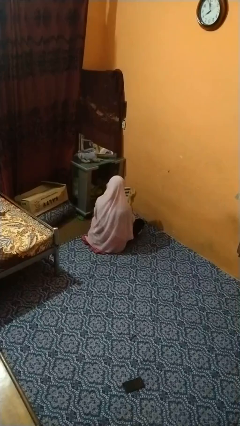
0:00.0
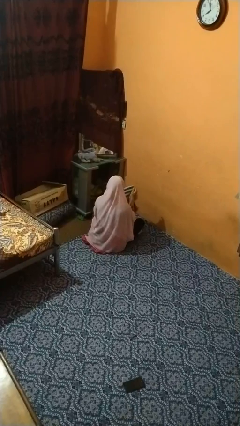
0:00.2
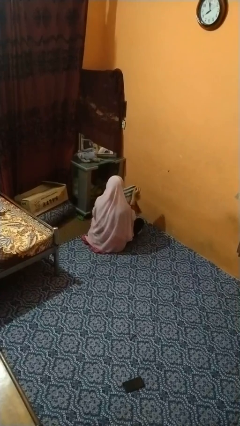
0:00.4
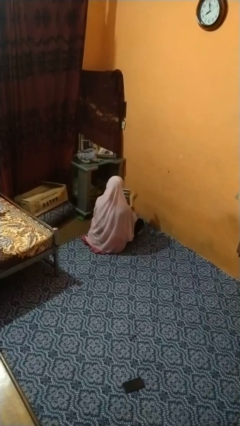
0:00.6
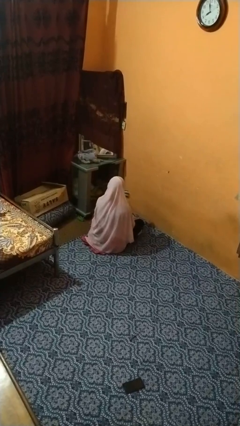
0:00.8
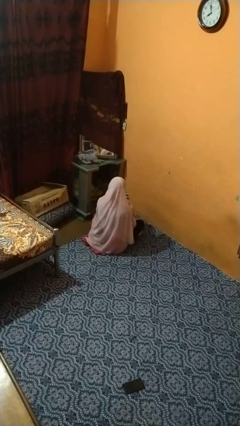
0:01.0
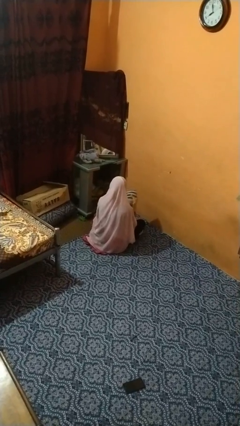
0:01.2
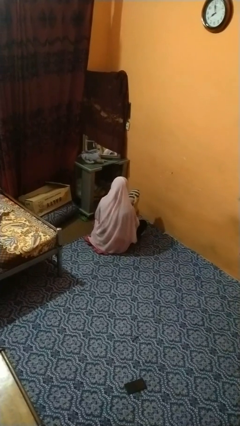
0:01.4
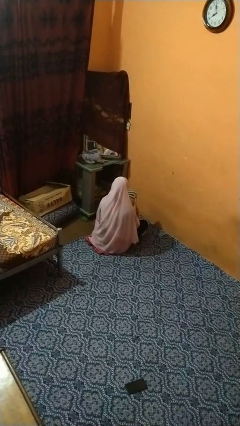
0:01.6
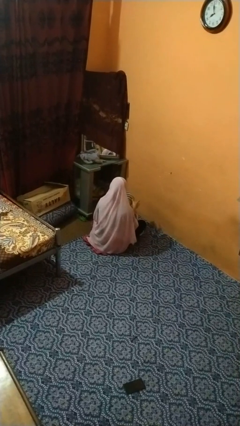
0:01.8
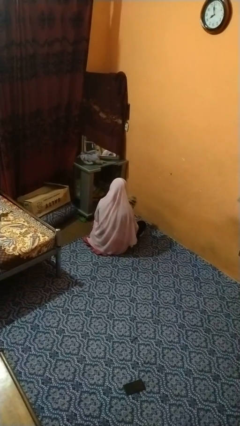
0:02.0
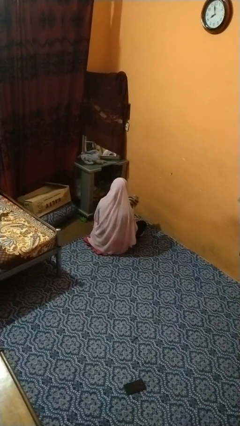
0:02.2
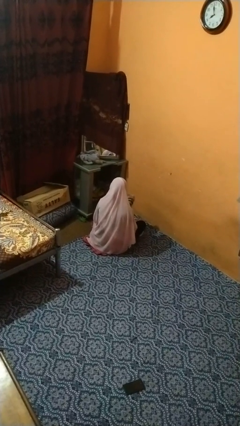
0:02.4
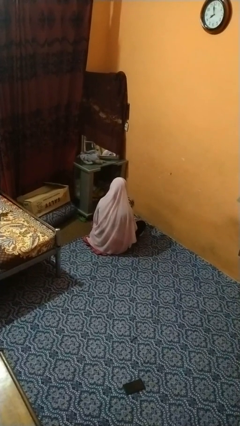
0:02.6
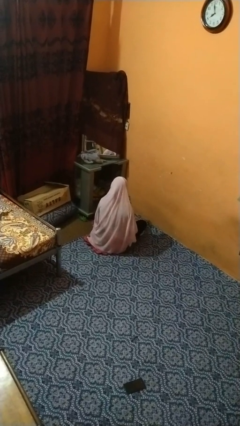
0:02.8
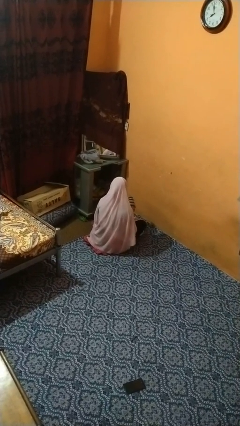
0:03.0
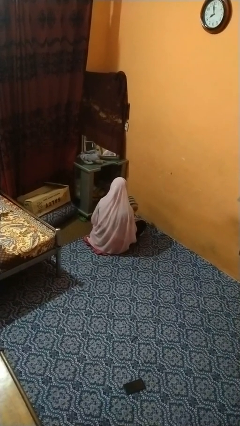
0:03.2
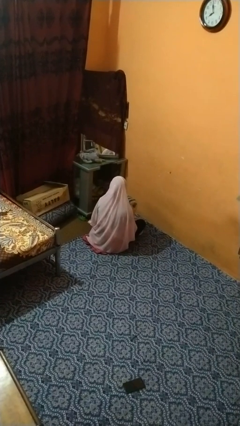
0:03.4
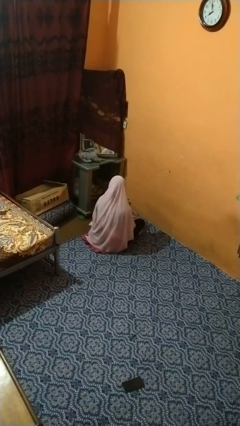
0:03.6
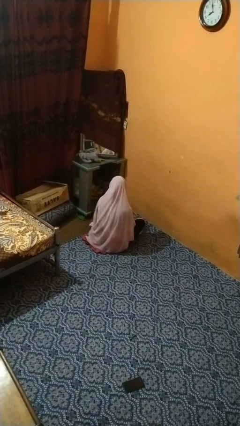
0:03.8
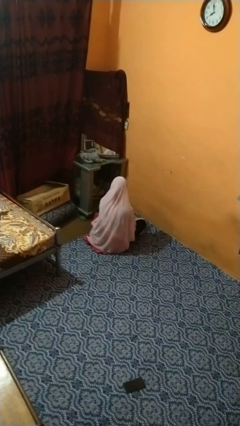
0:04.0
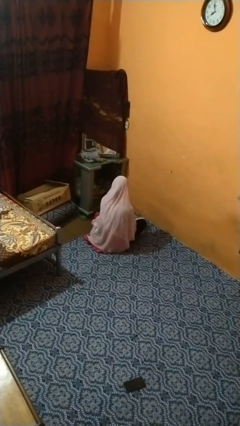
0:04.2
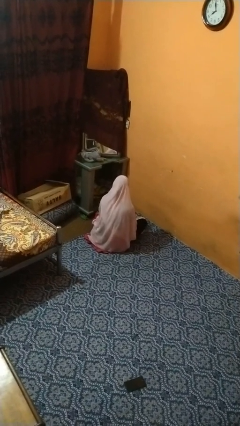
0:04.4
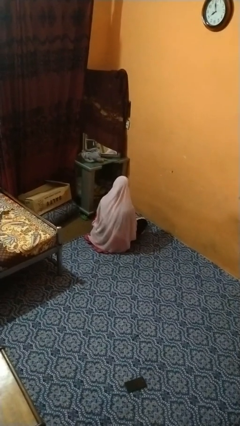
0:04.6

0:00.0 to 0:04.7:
person folds towel

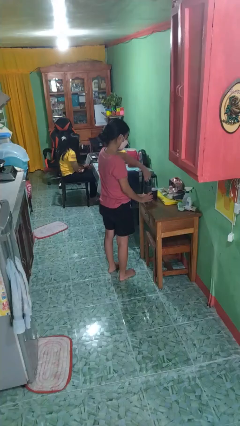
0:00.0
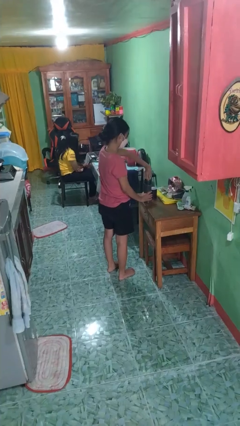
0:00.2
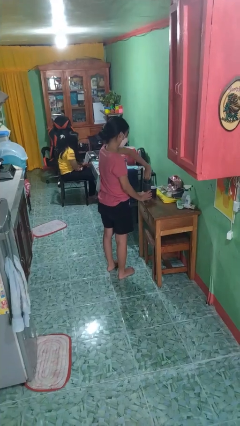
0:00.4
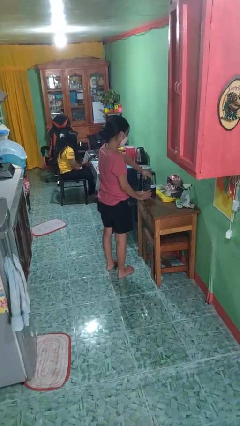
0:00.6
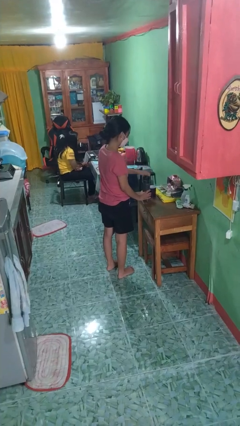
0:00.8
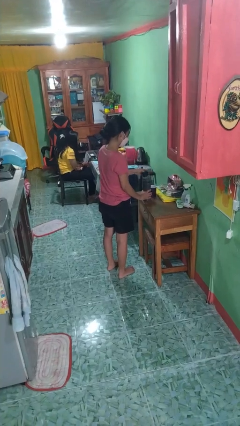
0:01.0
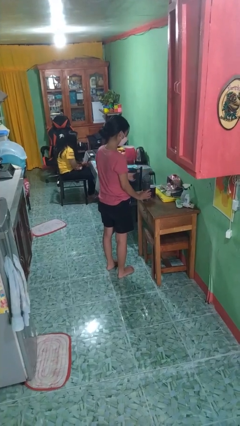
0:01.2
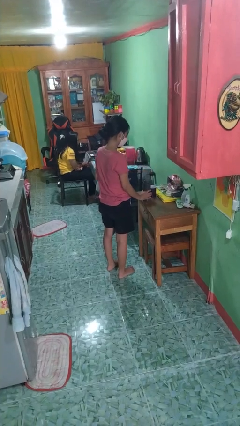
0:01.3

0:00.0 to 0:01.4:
person unscrews lid from bottle

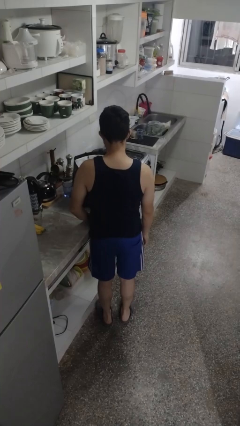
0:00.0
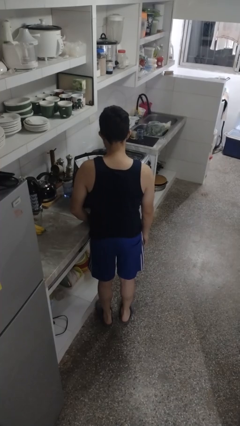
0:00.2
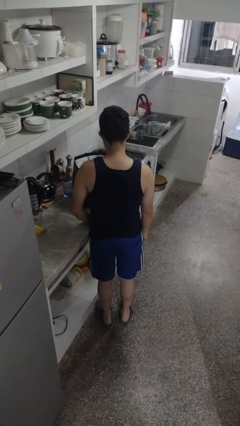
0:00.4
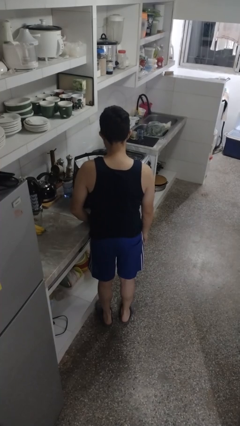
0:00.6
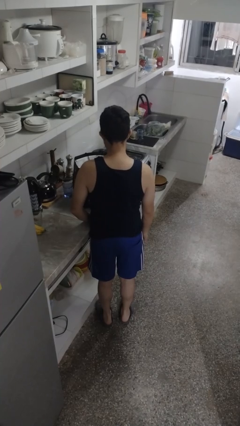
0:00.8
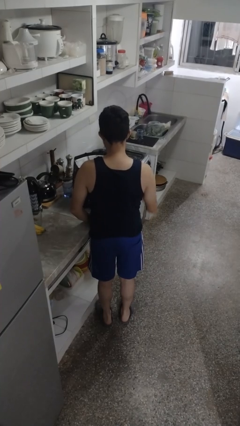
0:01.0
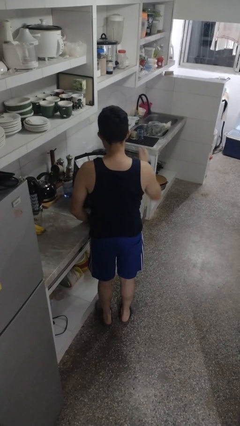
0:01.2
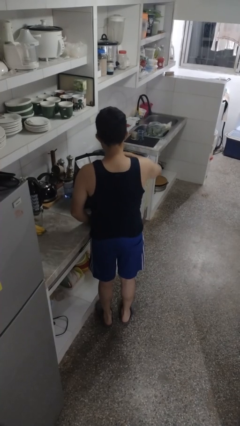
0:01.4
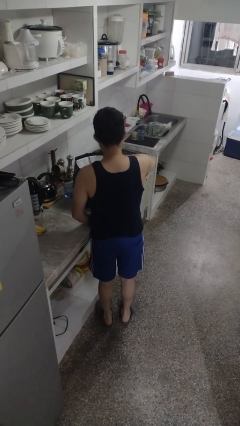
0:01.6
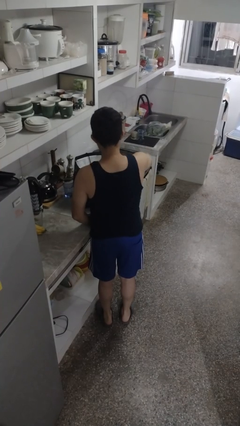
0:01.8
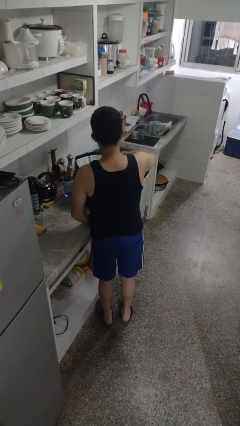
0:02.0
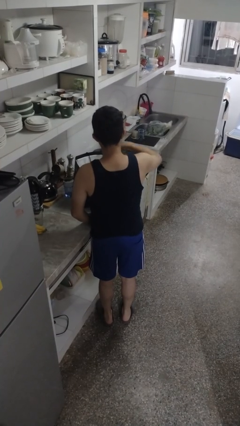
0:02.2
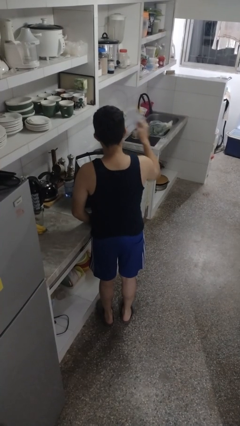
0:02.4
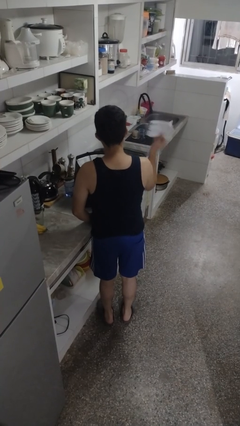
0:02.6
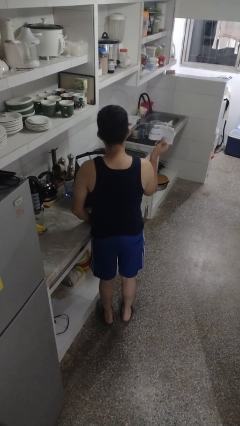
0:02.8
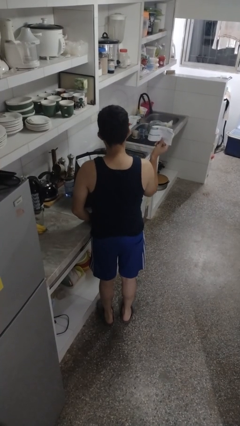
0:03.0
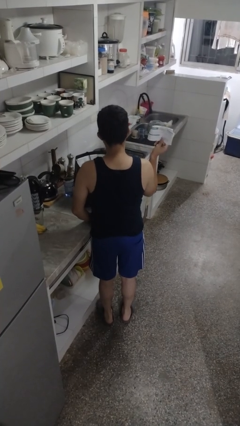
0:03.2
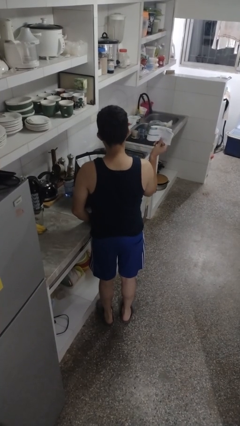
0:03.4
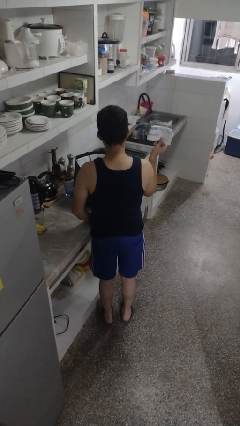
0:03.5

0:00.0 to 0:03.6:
person takes object from bag

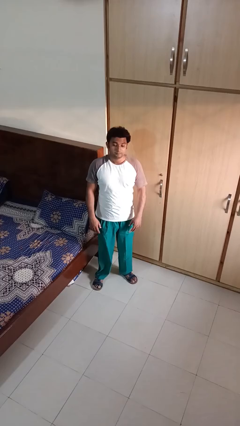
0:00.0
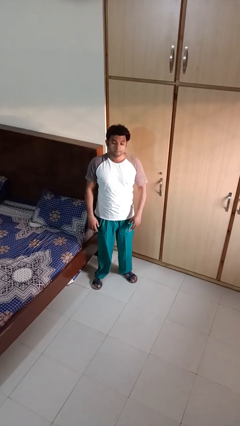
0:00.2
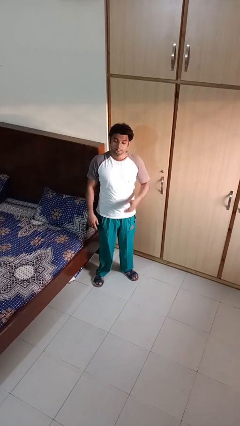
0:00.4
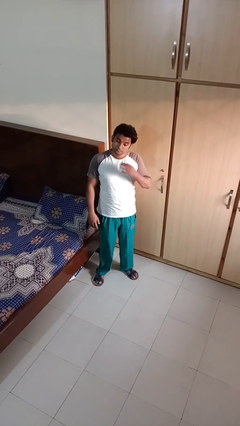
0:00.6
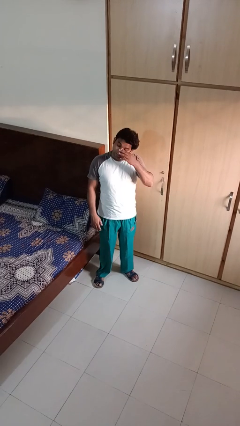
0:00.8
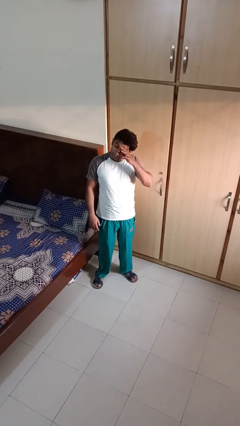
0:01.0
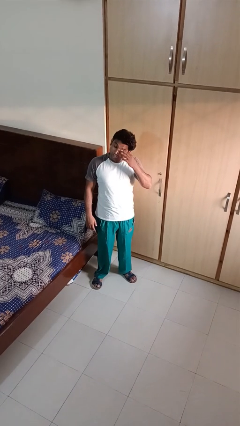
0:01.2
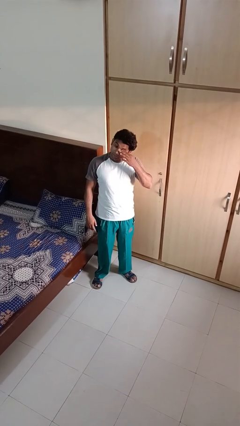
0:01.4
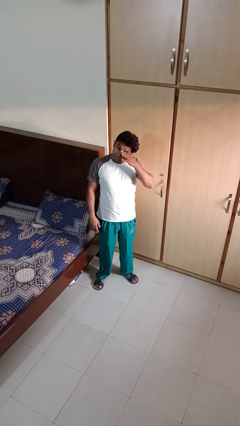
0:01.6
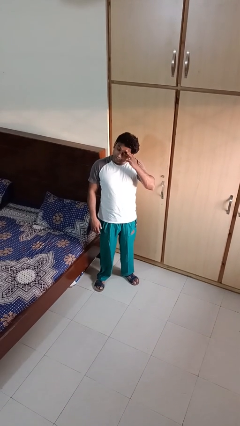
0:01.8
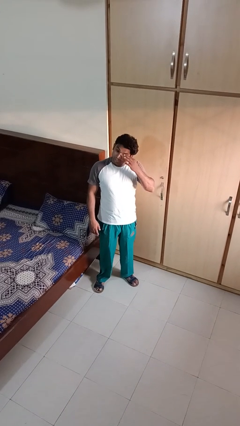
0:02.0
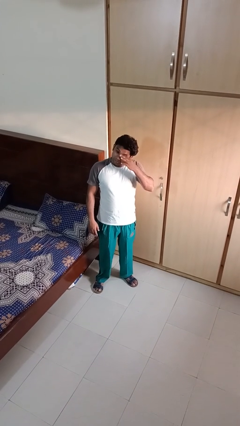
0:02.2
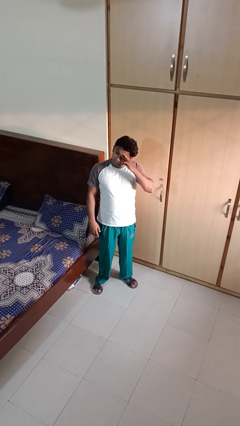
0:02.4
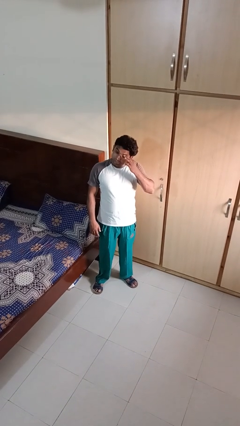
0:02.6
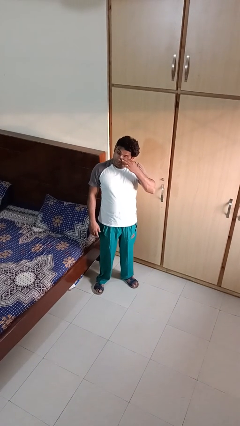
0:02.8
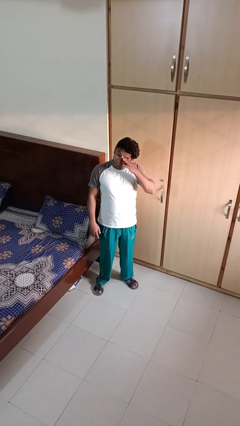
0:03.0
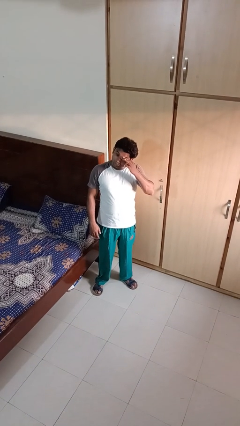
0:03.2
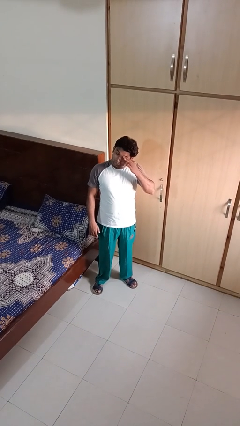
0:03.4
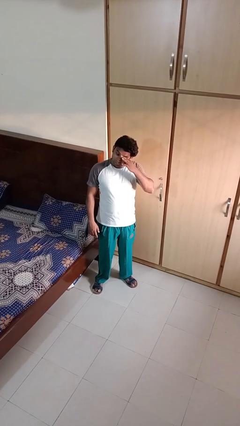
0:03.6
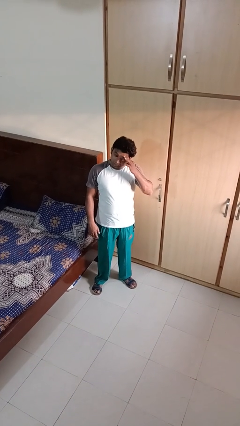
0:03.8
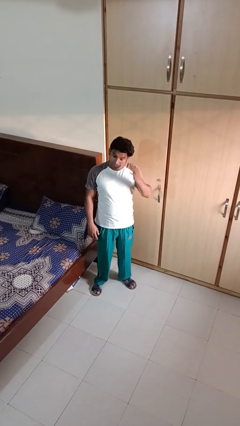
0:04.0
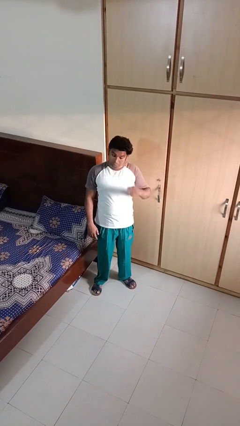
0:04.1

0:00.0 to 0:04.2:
person rubs eyes

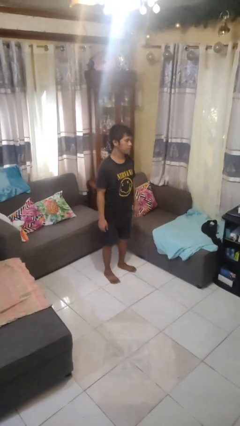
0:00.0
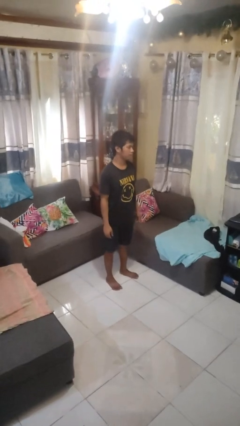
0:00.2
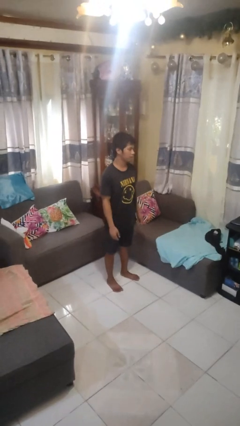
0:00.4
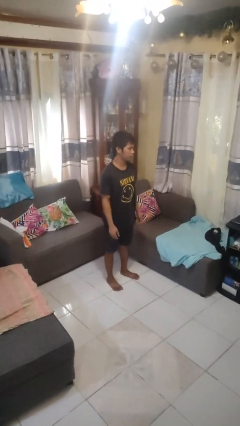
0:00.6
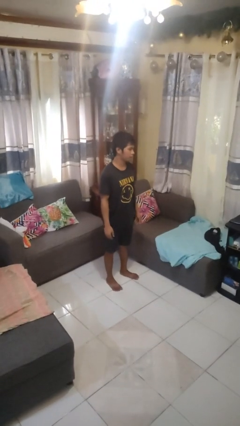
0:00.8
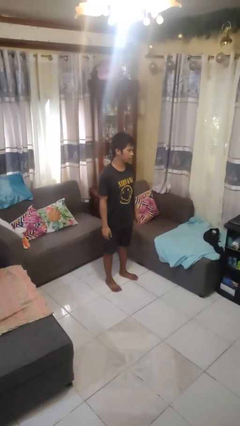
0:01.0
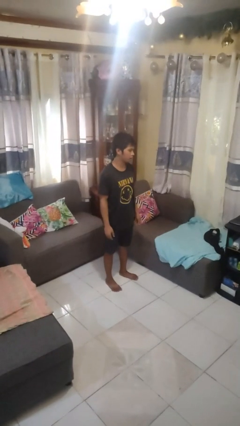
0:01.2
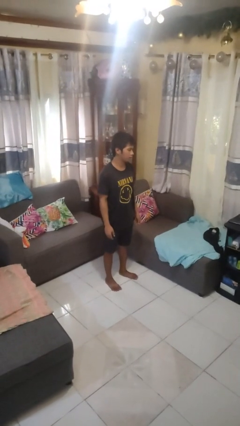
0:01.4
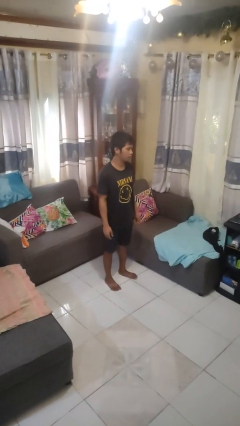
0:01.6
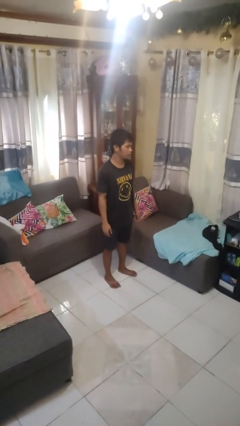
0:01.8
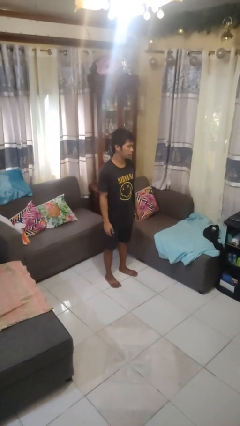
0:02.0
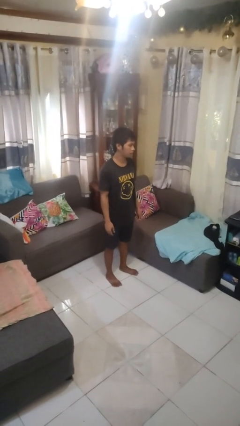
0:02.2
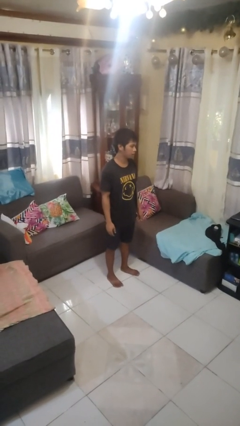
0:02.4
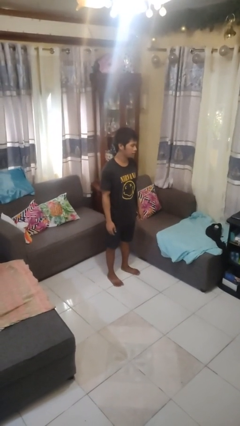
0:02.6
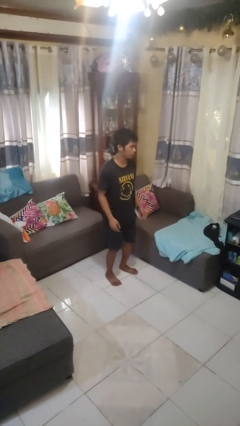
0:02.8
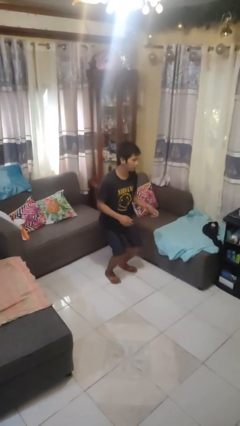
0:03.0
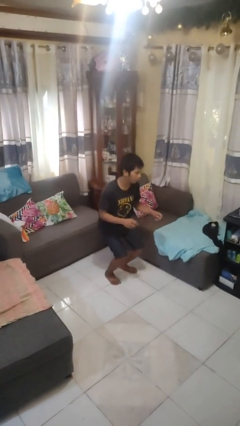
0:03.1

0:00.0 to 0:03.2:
person stands up

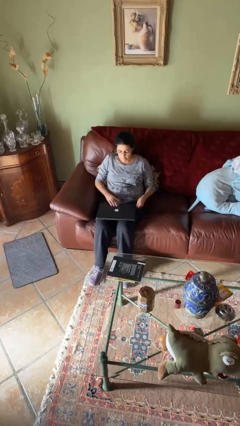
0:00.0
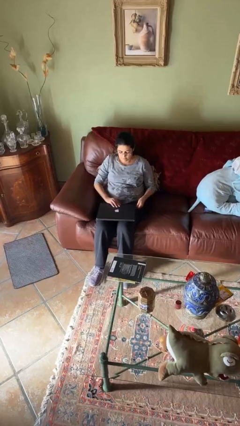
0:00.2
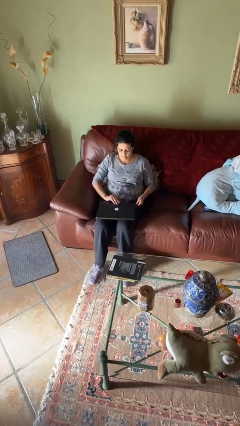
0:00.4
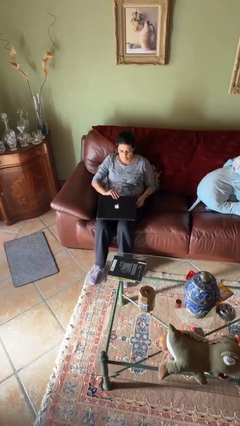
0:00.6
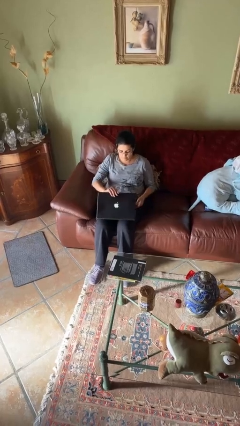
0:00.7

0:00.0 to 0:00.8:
person interacts with laptop
